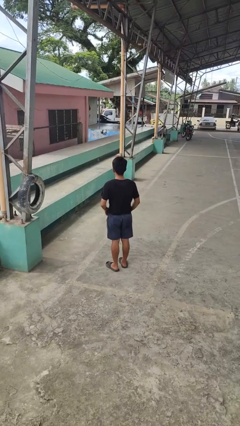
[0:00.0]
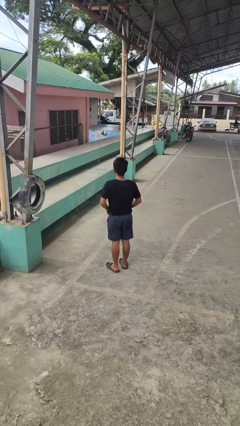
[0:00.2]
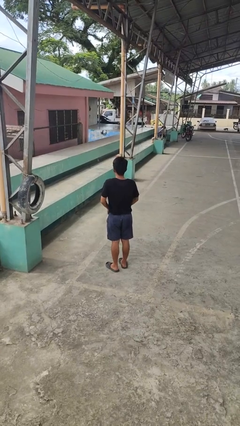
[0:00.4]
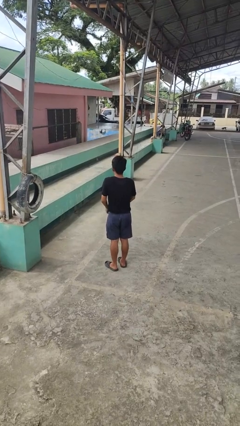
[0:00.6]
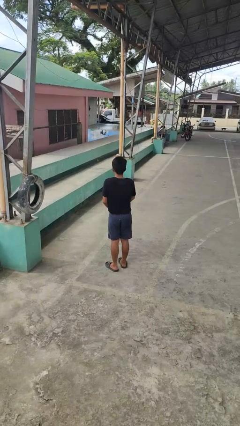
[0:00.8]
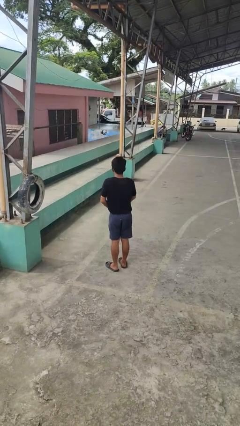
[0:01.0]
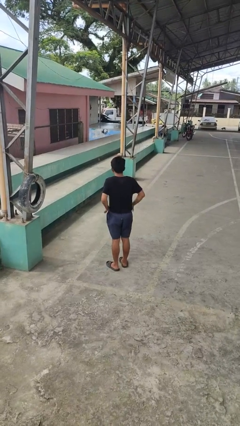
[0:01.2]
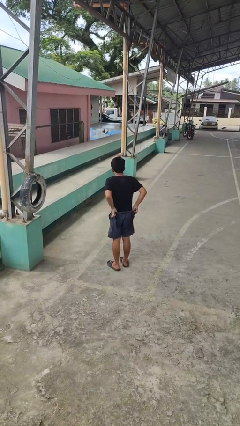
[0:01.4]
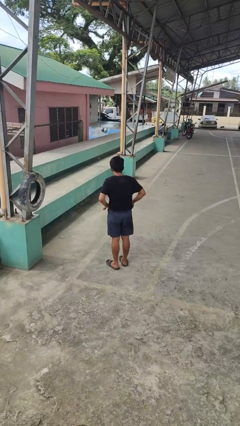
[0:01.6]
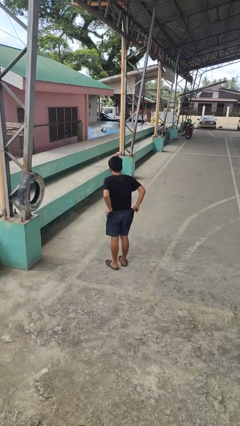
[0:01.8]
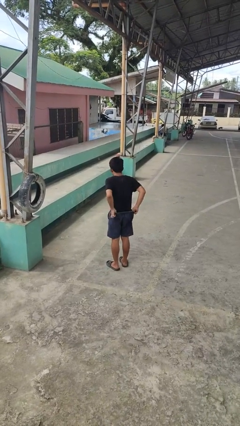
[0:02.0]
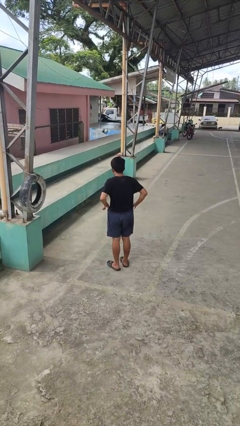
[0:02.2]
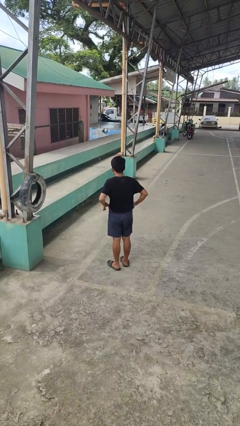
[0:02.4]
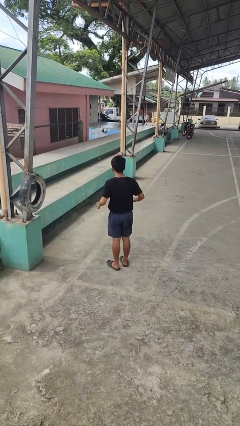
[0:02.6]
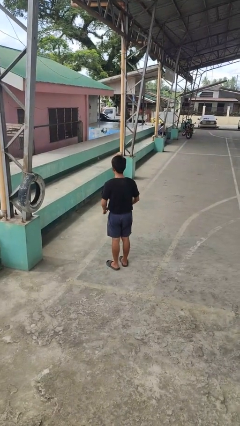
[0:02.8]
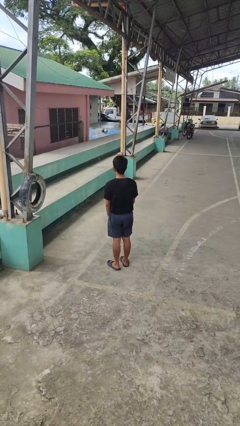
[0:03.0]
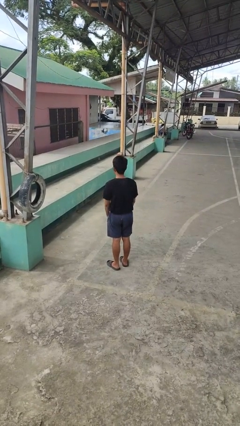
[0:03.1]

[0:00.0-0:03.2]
person hikes up pants

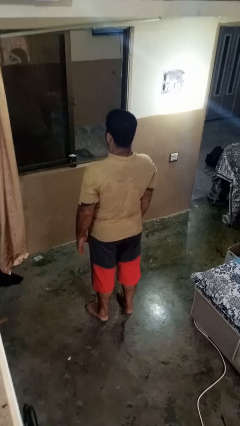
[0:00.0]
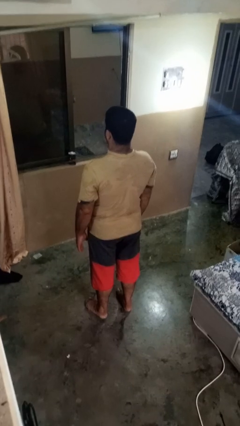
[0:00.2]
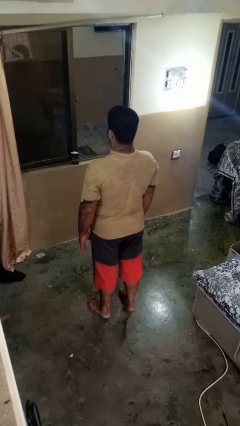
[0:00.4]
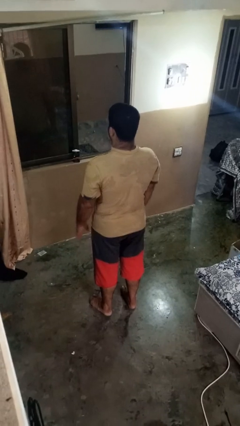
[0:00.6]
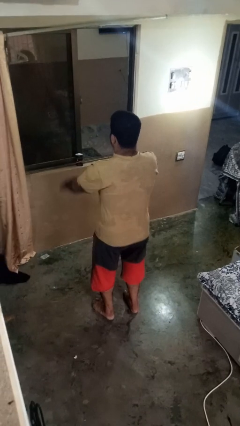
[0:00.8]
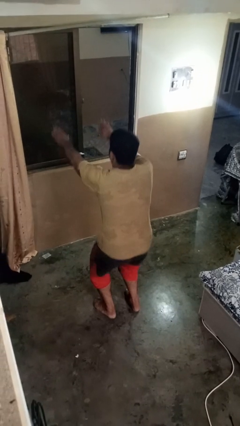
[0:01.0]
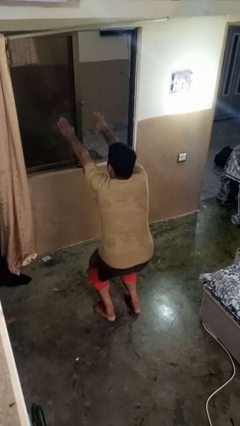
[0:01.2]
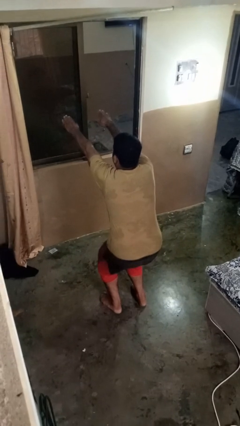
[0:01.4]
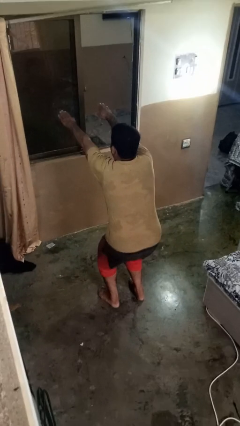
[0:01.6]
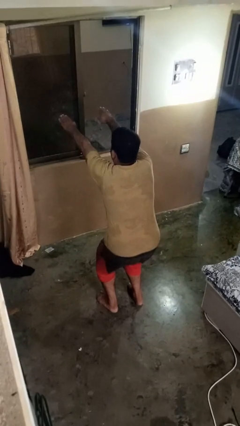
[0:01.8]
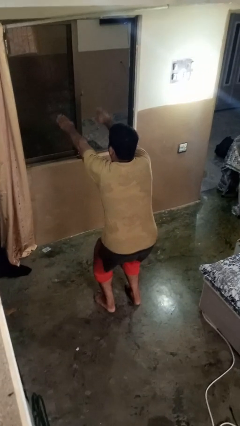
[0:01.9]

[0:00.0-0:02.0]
person squats

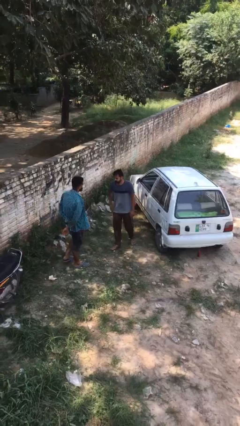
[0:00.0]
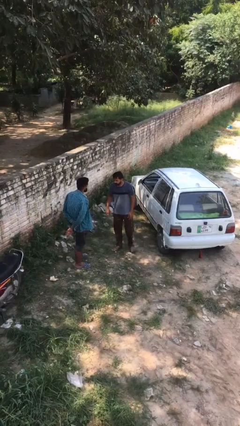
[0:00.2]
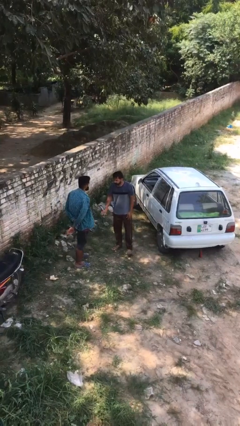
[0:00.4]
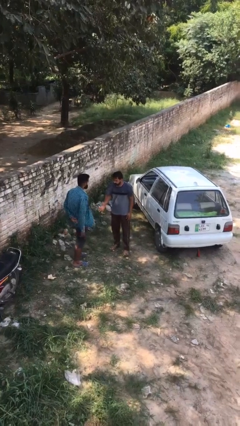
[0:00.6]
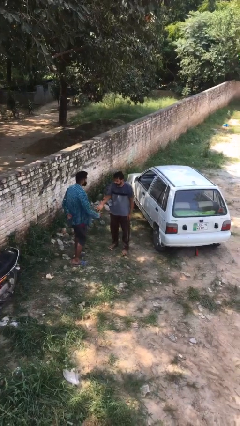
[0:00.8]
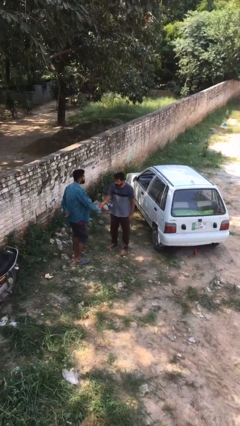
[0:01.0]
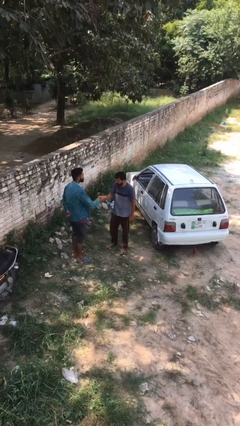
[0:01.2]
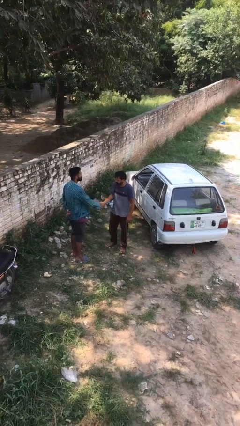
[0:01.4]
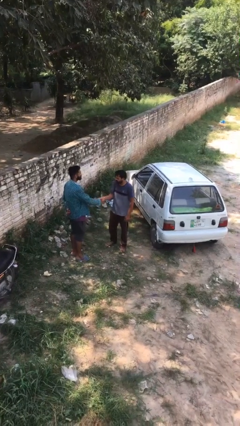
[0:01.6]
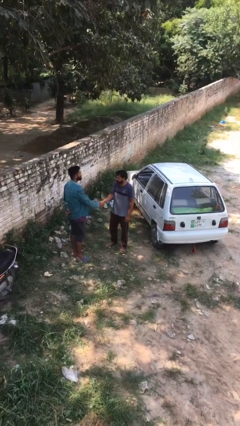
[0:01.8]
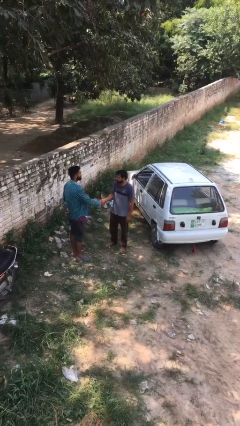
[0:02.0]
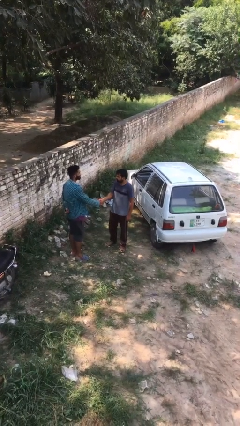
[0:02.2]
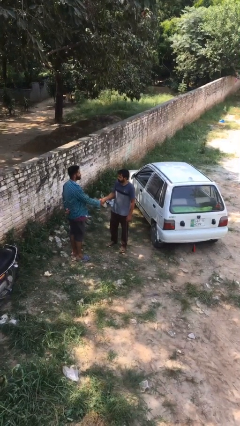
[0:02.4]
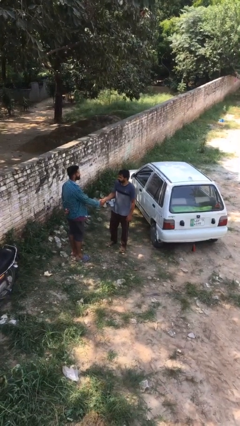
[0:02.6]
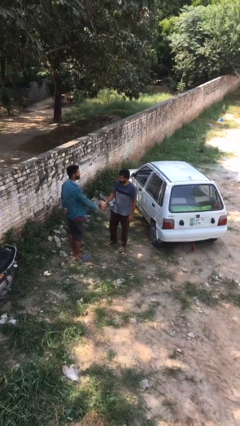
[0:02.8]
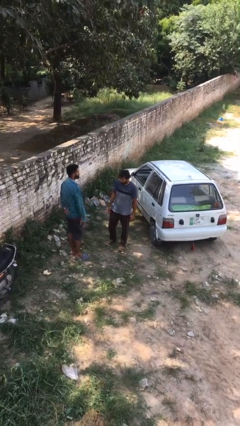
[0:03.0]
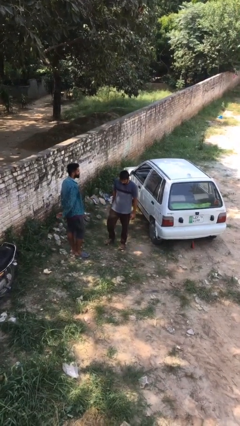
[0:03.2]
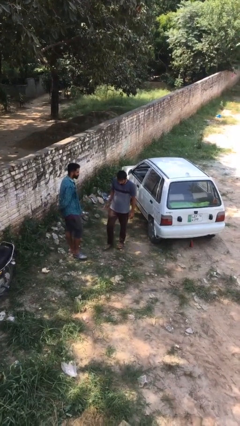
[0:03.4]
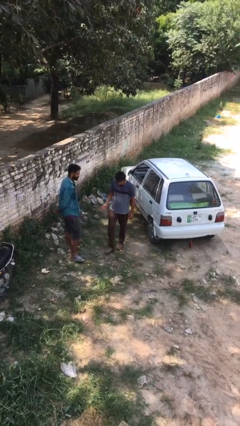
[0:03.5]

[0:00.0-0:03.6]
person shakes hand

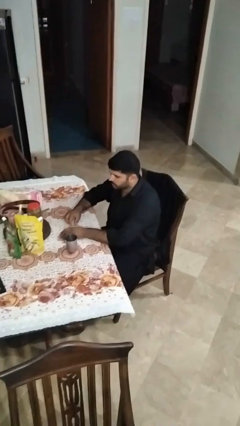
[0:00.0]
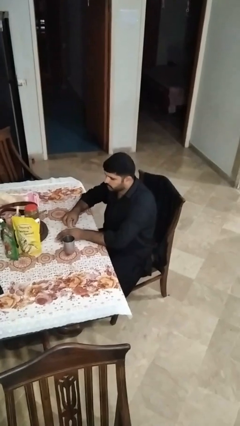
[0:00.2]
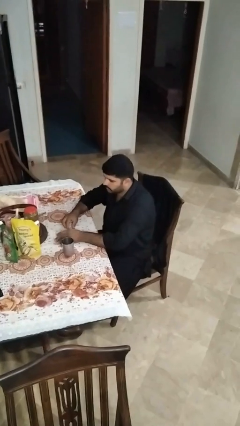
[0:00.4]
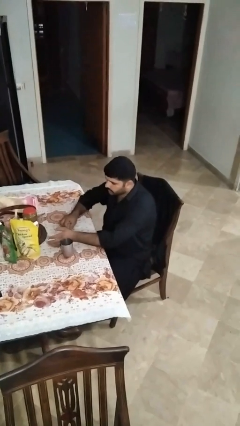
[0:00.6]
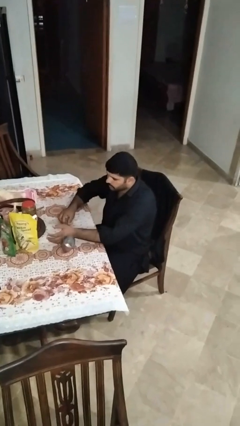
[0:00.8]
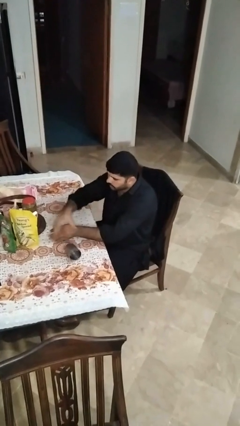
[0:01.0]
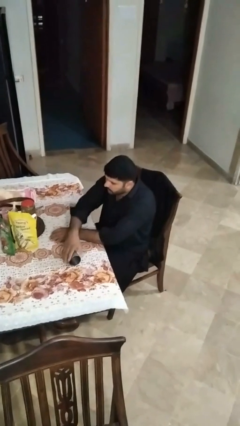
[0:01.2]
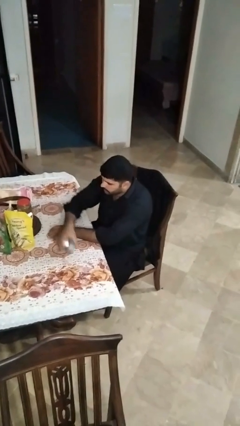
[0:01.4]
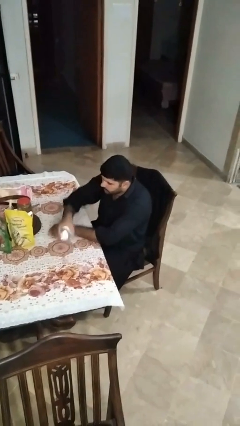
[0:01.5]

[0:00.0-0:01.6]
person knocks over glass

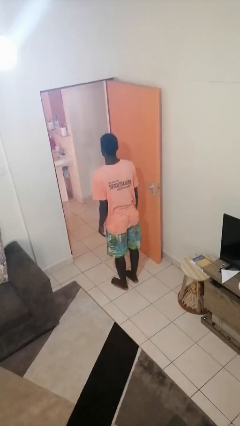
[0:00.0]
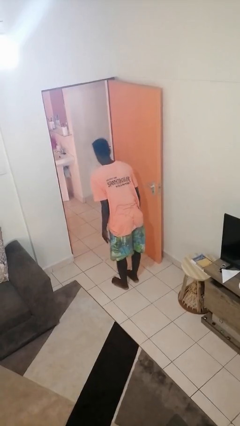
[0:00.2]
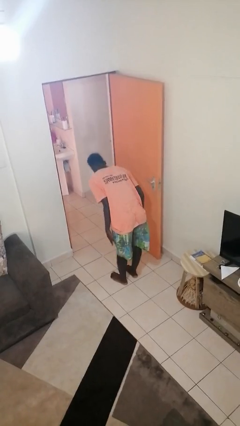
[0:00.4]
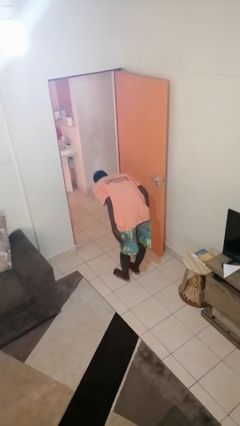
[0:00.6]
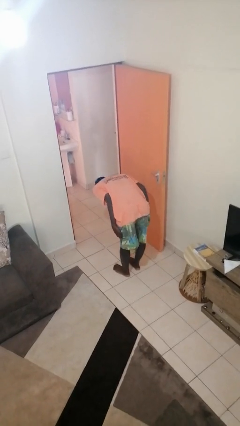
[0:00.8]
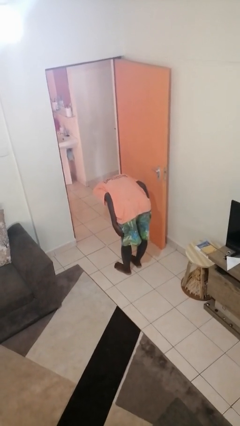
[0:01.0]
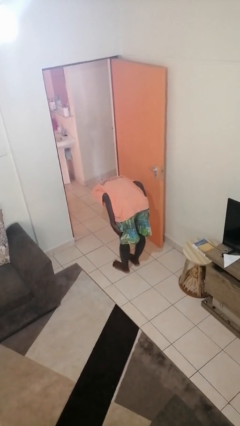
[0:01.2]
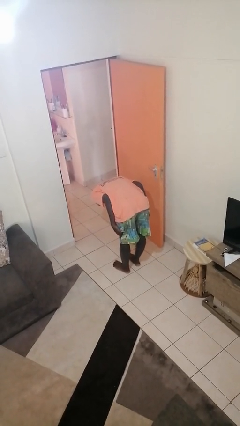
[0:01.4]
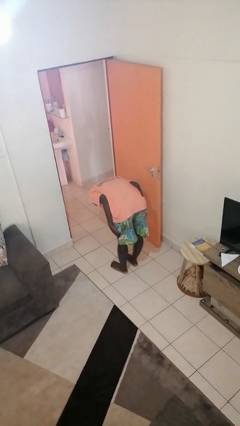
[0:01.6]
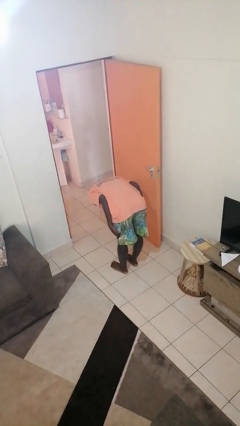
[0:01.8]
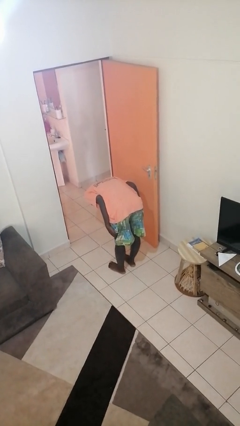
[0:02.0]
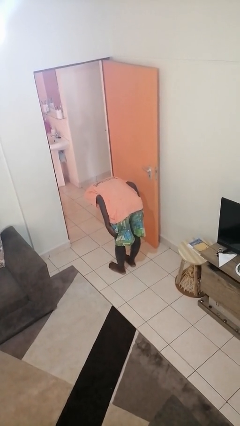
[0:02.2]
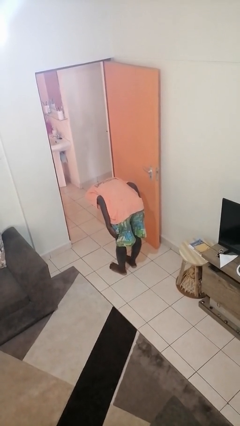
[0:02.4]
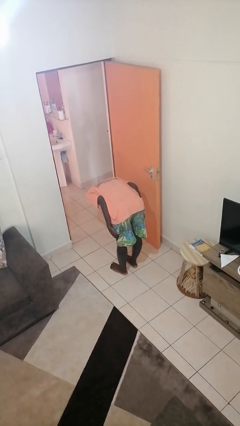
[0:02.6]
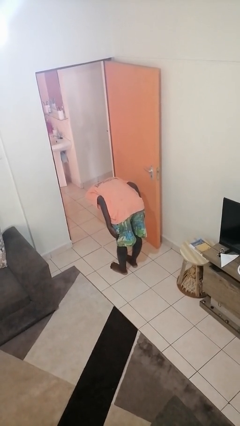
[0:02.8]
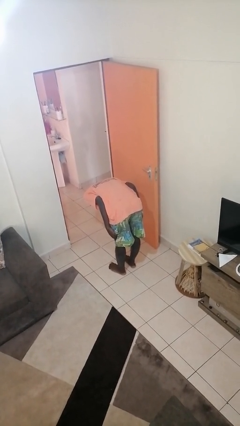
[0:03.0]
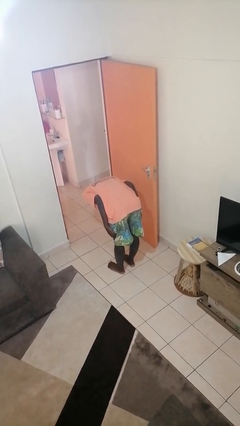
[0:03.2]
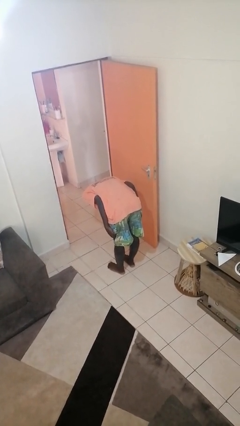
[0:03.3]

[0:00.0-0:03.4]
person bows

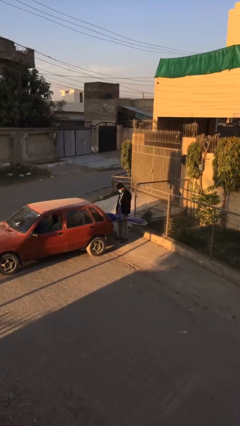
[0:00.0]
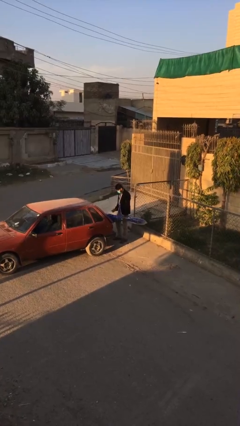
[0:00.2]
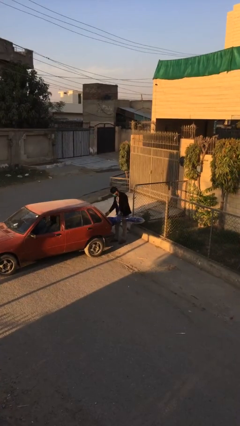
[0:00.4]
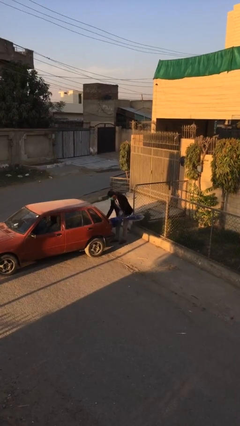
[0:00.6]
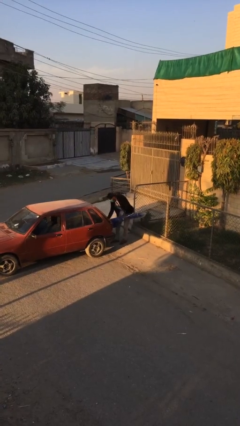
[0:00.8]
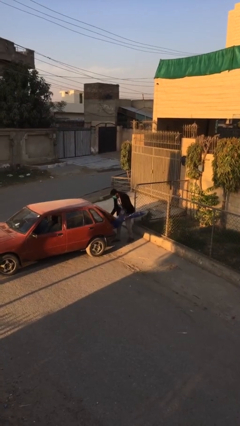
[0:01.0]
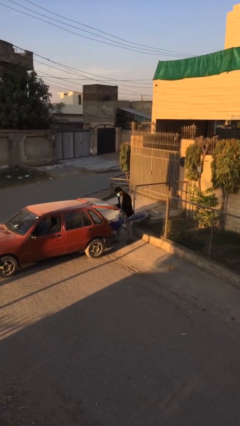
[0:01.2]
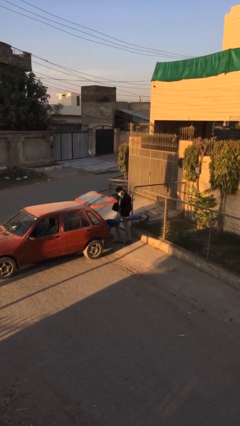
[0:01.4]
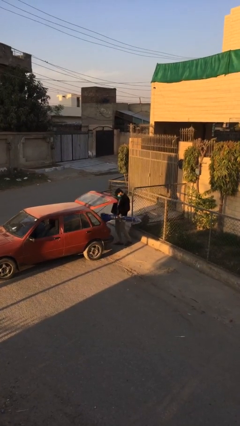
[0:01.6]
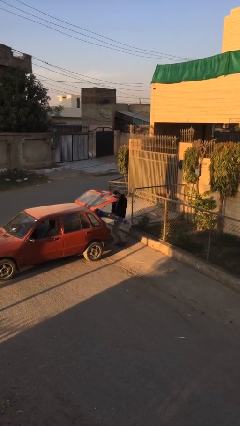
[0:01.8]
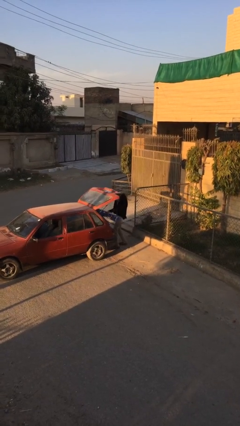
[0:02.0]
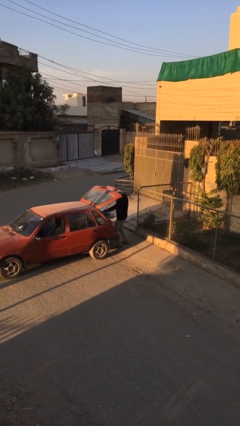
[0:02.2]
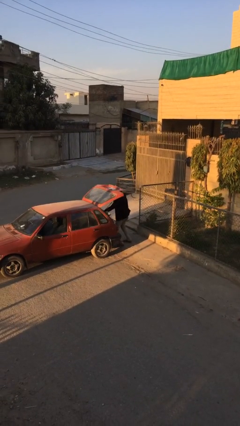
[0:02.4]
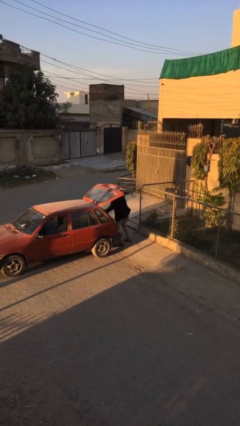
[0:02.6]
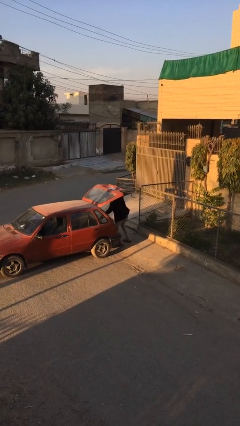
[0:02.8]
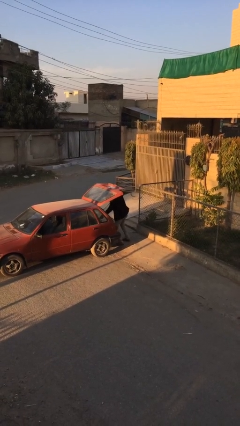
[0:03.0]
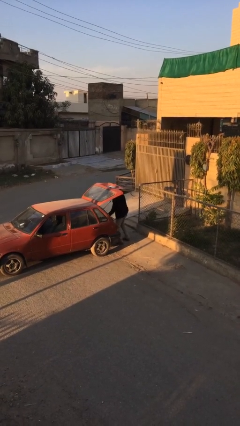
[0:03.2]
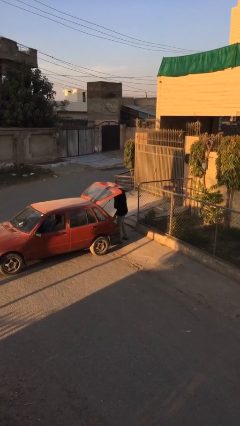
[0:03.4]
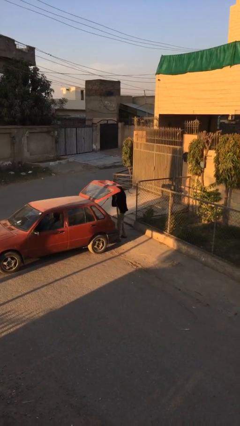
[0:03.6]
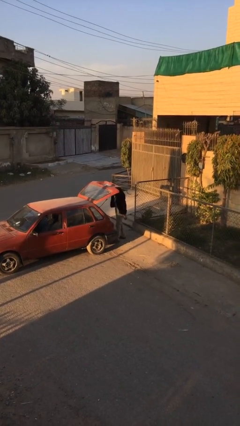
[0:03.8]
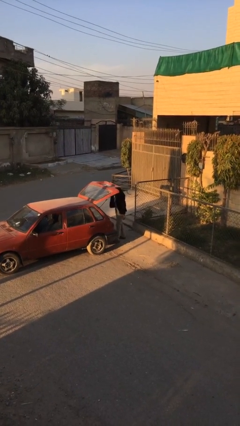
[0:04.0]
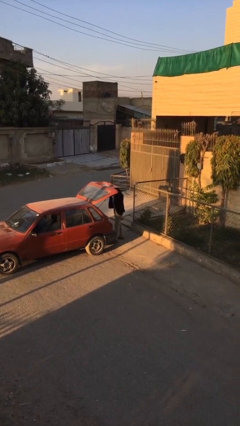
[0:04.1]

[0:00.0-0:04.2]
person loads car
